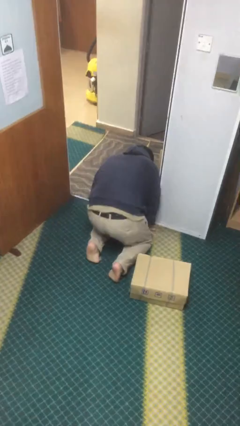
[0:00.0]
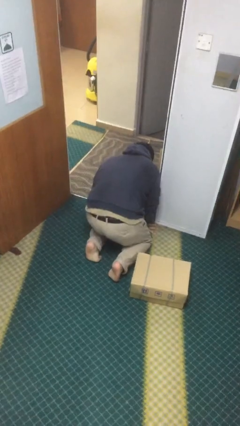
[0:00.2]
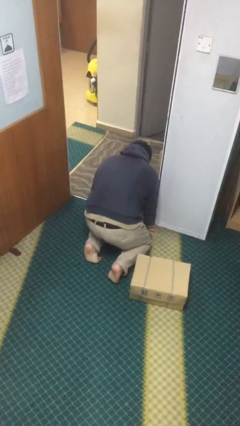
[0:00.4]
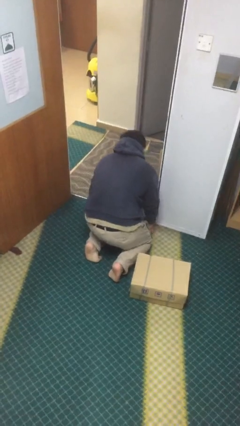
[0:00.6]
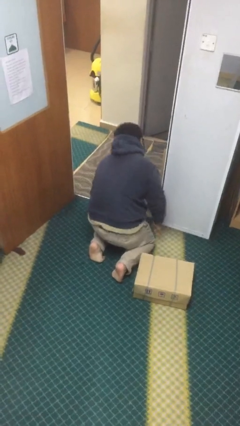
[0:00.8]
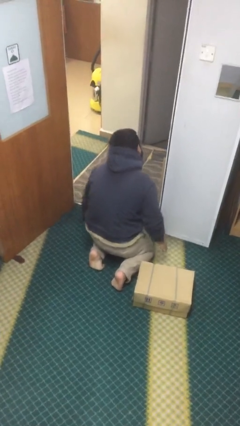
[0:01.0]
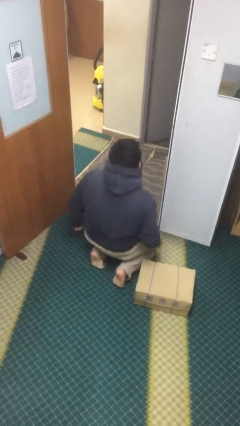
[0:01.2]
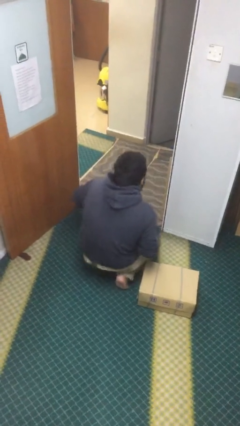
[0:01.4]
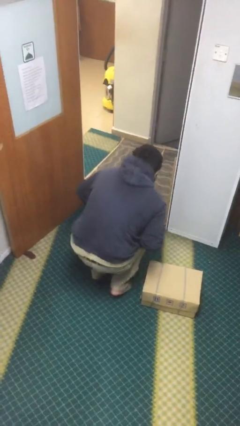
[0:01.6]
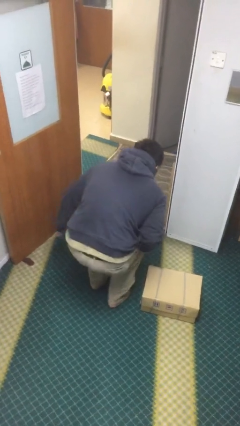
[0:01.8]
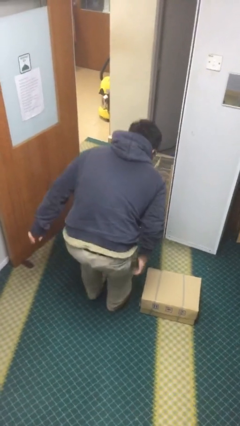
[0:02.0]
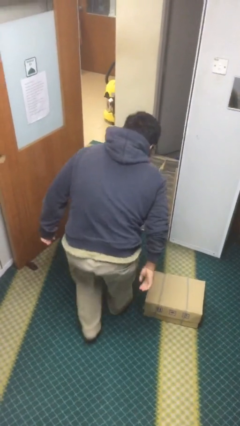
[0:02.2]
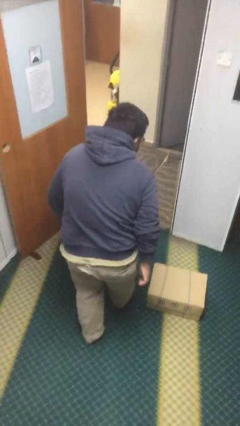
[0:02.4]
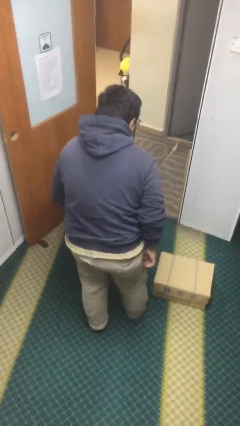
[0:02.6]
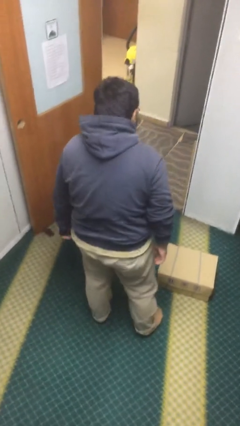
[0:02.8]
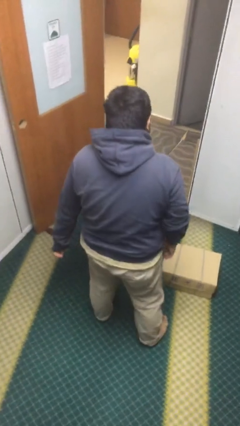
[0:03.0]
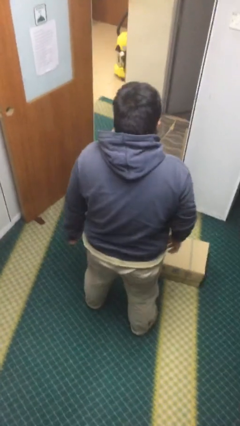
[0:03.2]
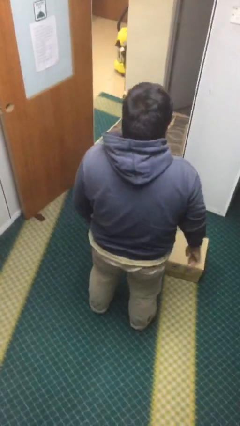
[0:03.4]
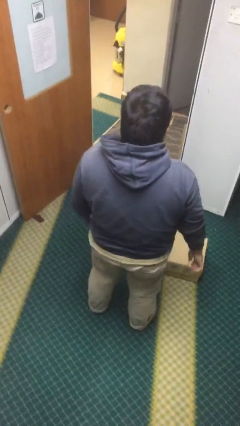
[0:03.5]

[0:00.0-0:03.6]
person stands up from floor

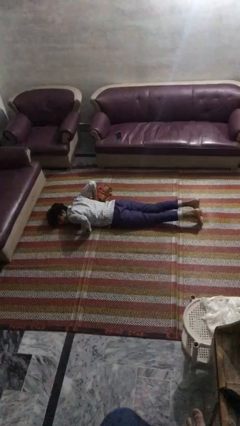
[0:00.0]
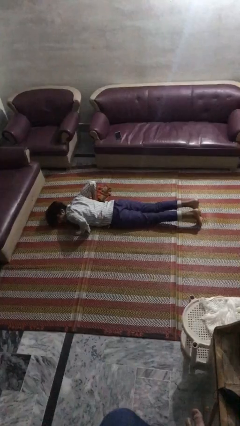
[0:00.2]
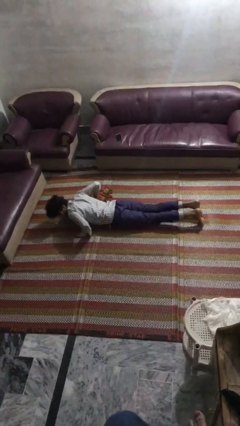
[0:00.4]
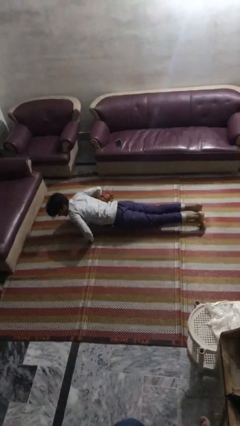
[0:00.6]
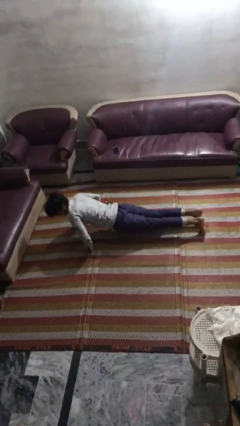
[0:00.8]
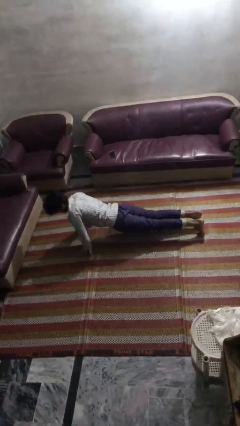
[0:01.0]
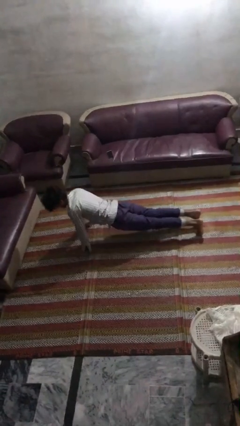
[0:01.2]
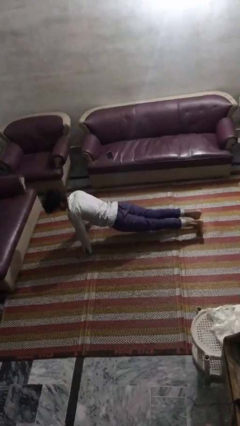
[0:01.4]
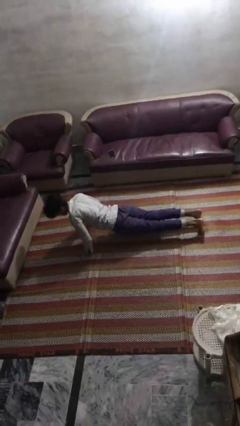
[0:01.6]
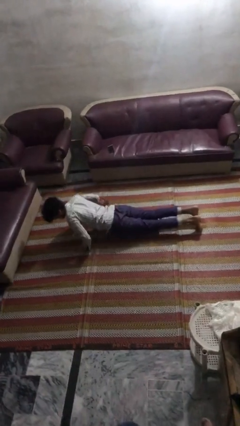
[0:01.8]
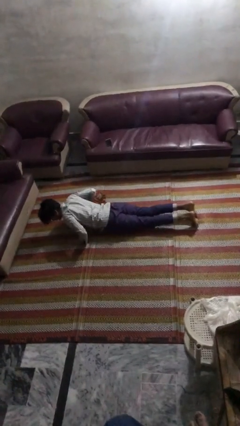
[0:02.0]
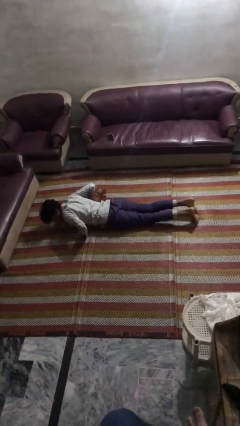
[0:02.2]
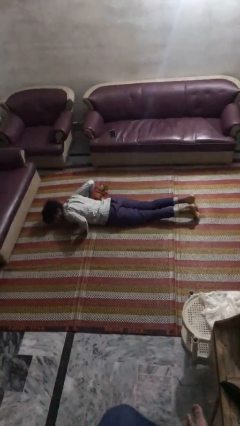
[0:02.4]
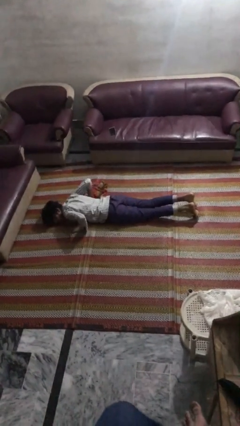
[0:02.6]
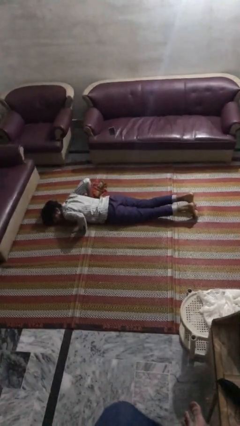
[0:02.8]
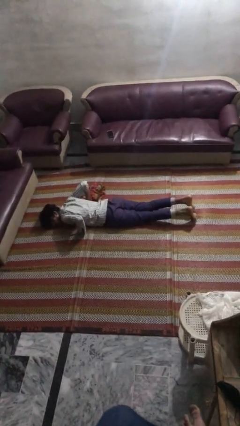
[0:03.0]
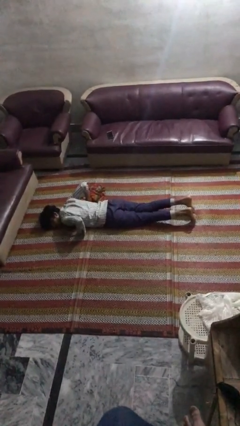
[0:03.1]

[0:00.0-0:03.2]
person exercises with pushup

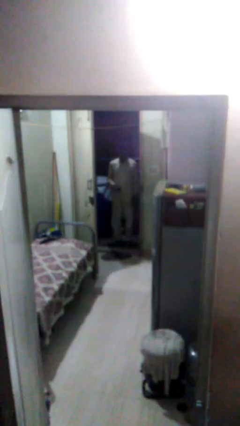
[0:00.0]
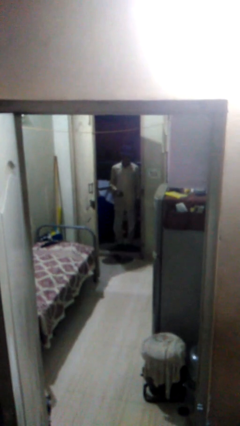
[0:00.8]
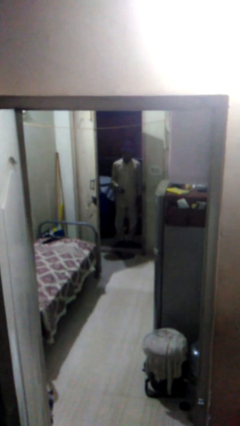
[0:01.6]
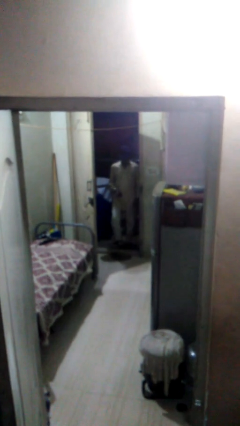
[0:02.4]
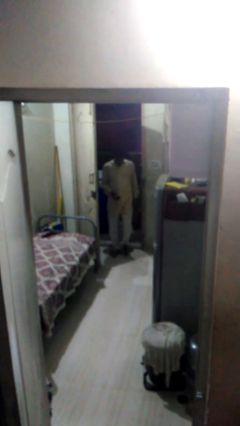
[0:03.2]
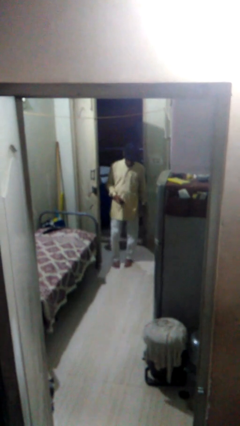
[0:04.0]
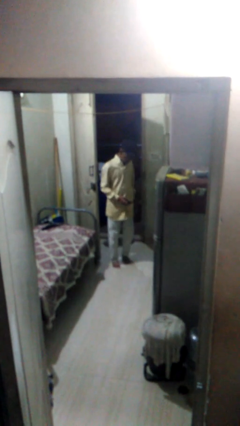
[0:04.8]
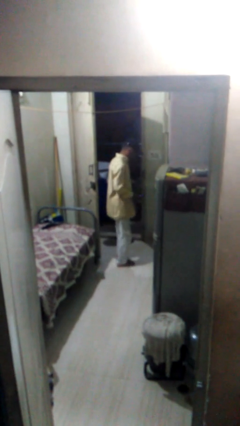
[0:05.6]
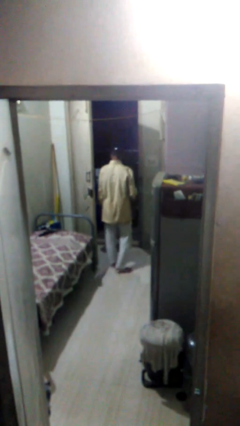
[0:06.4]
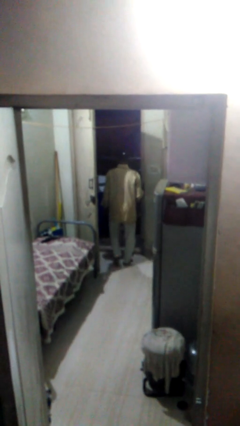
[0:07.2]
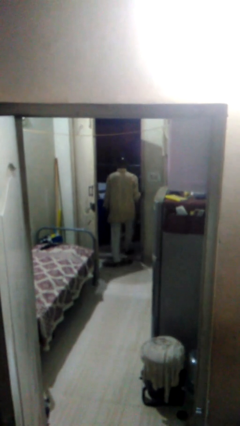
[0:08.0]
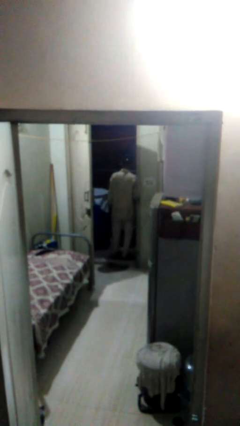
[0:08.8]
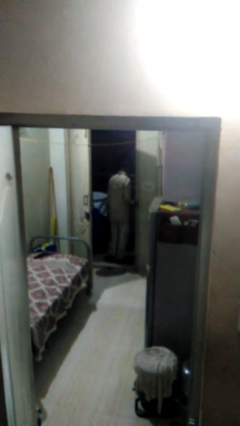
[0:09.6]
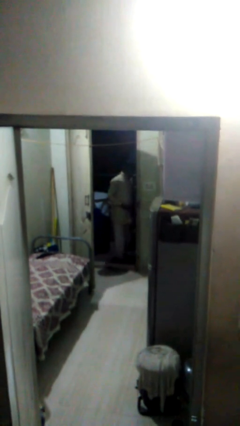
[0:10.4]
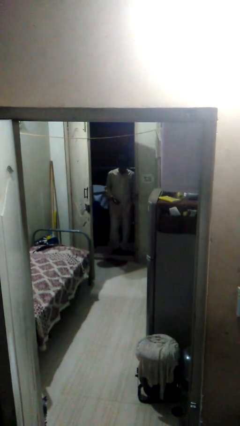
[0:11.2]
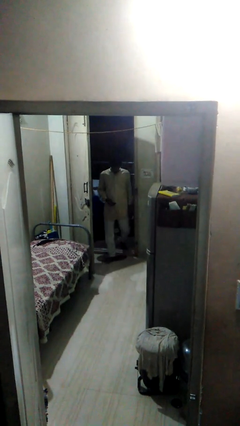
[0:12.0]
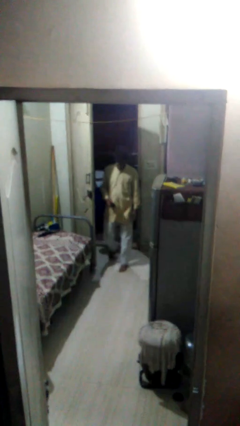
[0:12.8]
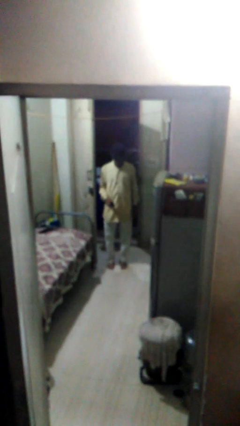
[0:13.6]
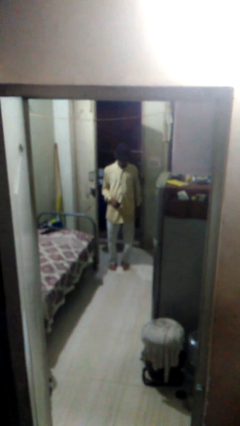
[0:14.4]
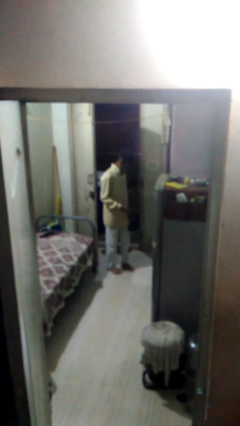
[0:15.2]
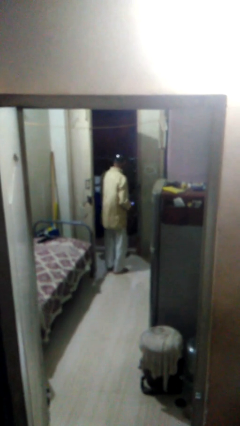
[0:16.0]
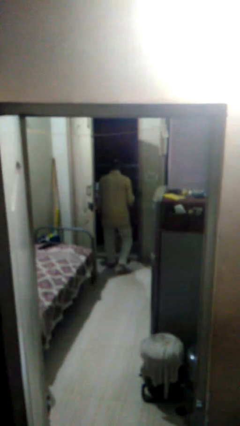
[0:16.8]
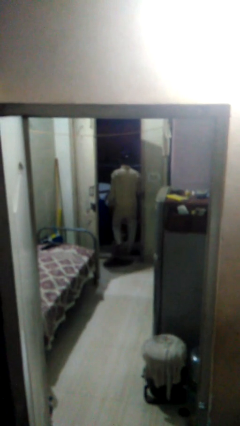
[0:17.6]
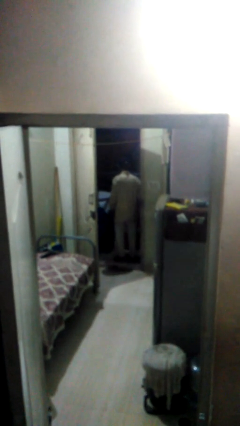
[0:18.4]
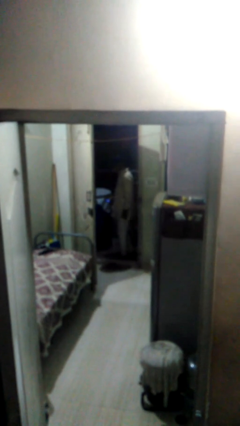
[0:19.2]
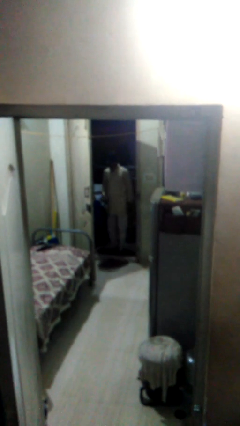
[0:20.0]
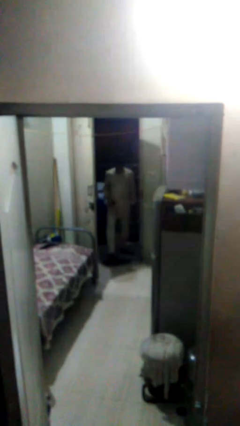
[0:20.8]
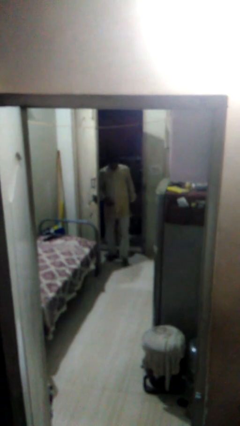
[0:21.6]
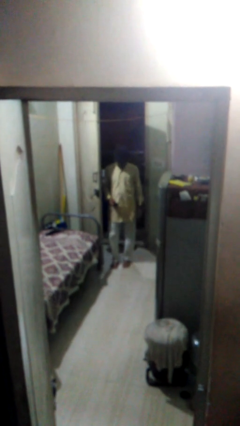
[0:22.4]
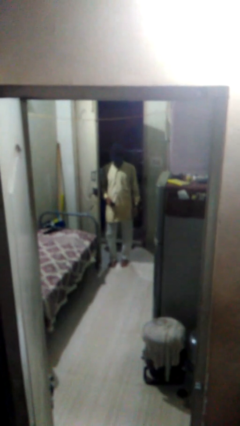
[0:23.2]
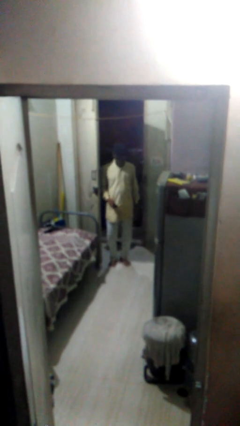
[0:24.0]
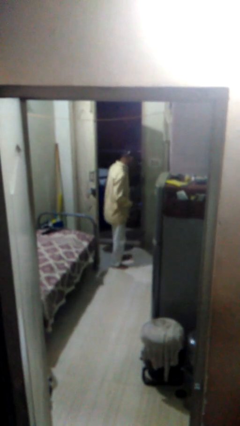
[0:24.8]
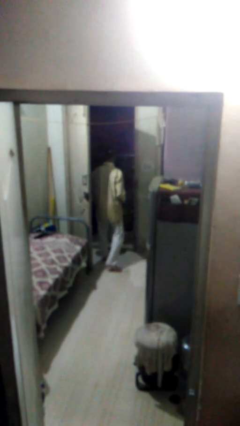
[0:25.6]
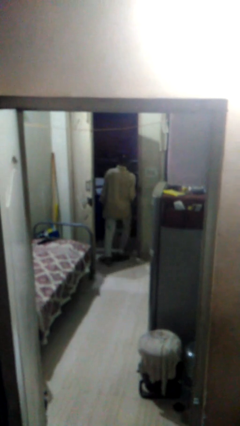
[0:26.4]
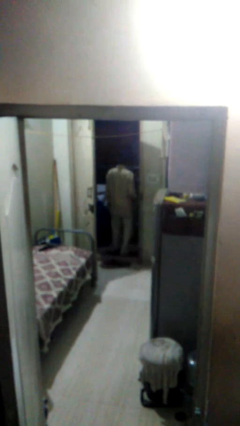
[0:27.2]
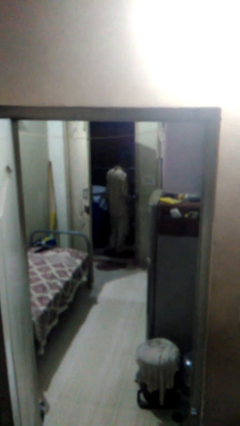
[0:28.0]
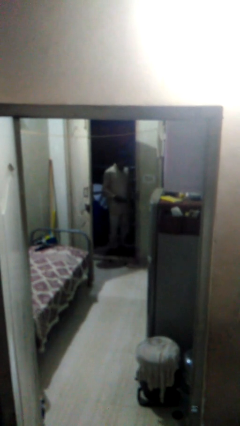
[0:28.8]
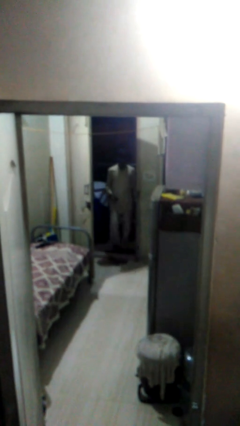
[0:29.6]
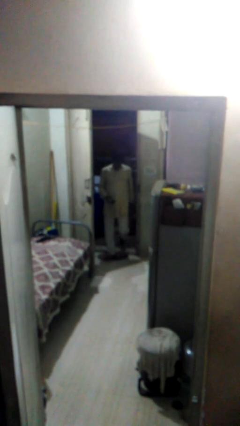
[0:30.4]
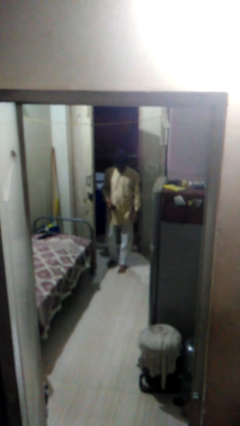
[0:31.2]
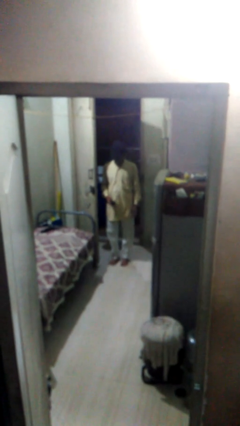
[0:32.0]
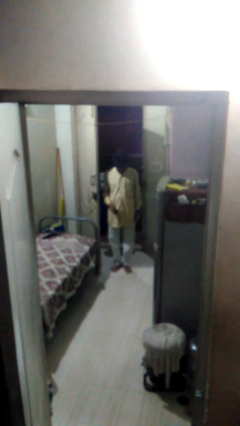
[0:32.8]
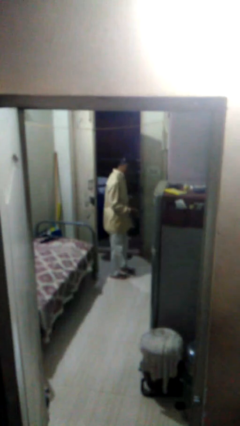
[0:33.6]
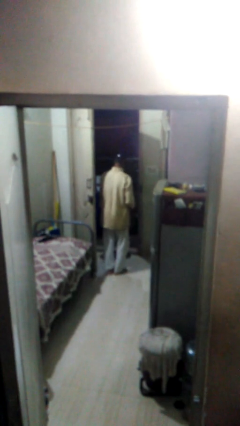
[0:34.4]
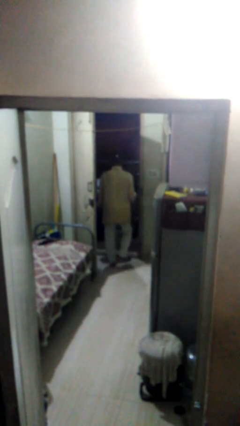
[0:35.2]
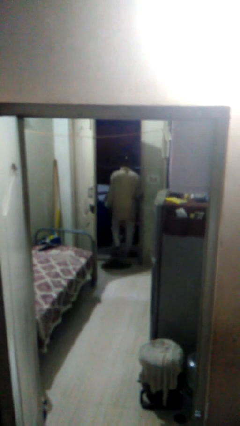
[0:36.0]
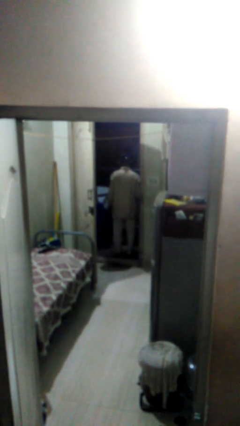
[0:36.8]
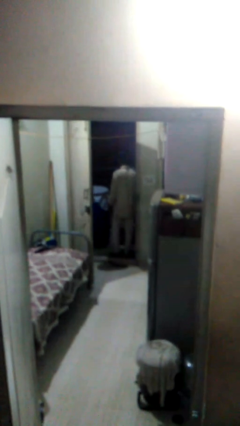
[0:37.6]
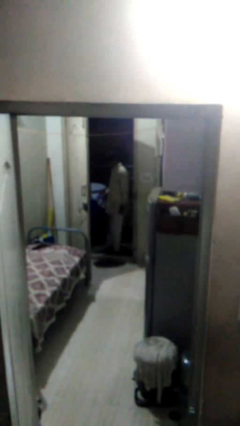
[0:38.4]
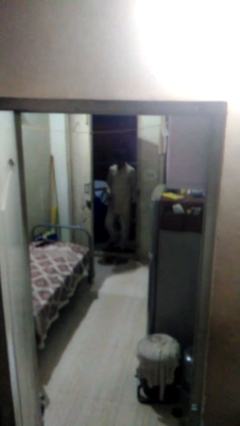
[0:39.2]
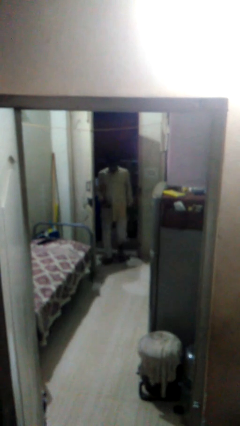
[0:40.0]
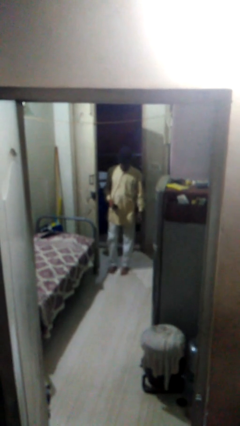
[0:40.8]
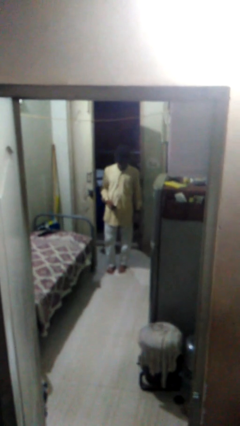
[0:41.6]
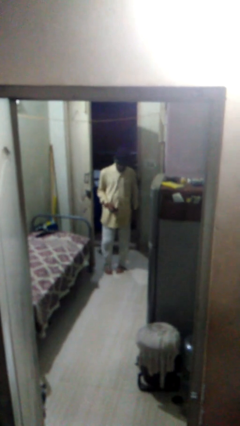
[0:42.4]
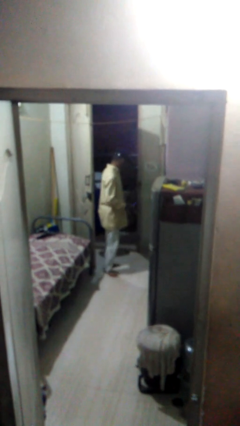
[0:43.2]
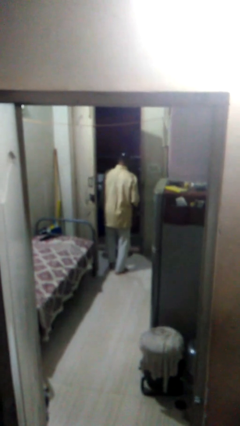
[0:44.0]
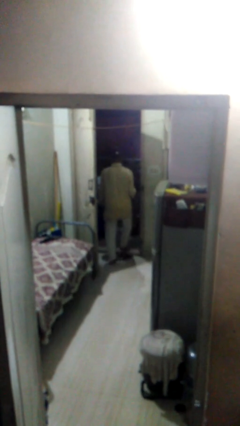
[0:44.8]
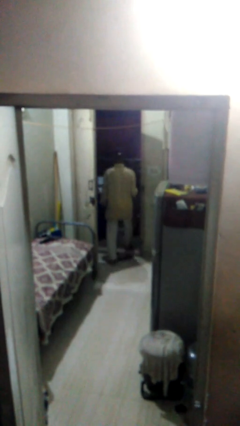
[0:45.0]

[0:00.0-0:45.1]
person texts on phone
